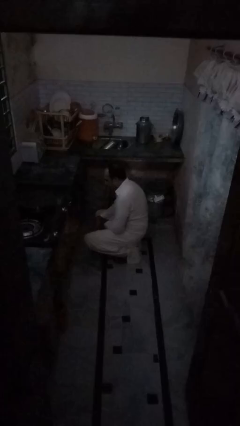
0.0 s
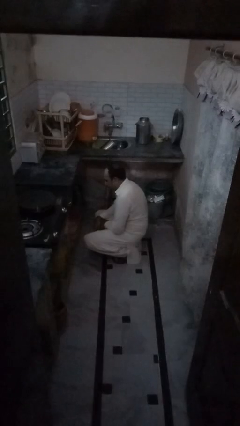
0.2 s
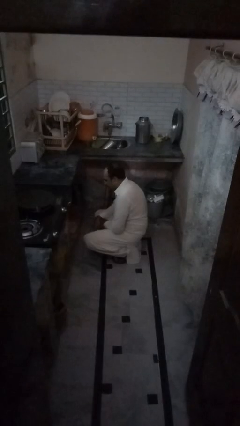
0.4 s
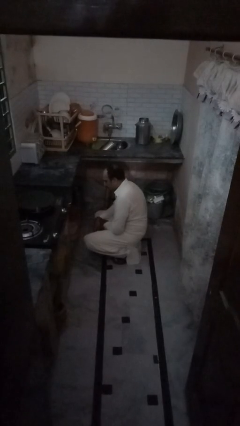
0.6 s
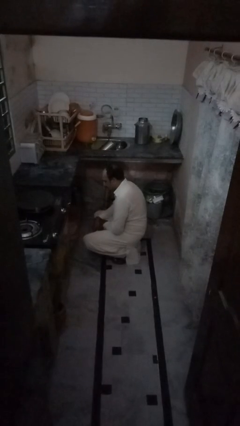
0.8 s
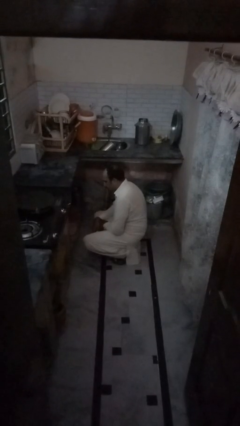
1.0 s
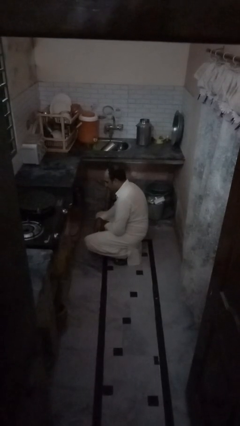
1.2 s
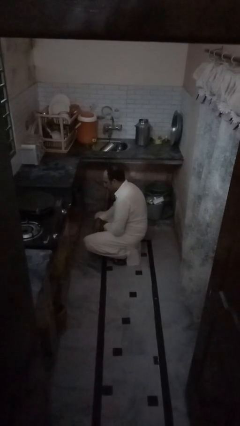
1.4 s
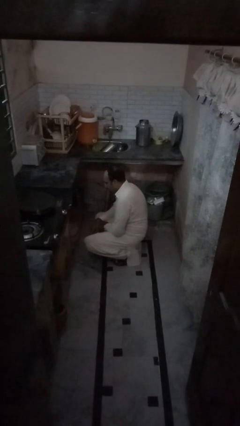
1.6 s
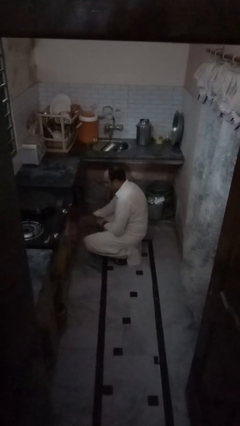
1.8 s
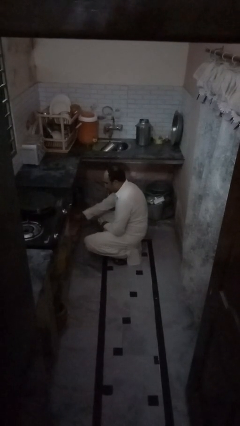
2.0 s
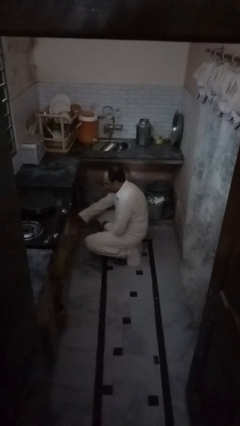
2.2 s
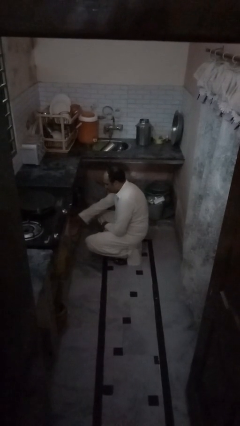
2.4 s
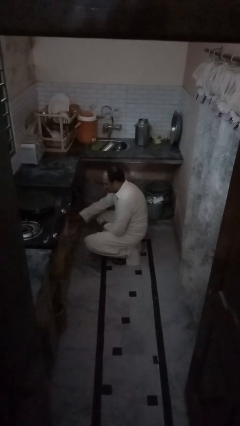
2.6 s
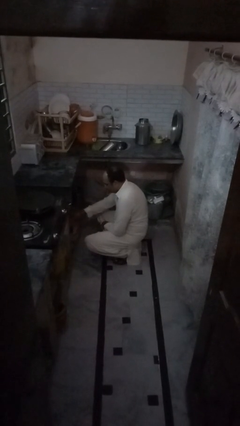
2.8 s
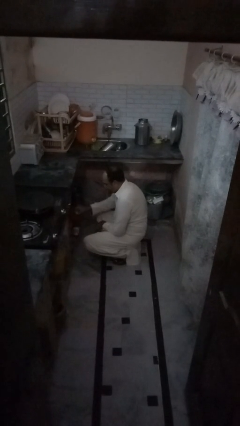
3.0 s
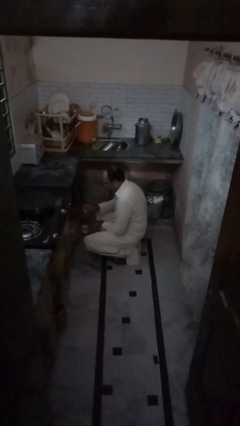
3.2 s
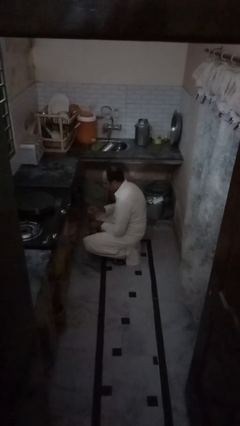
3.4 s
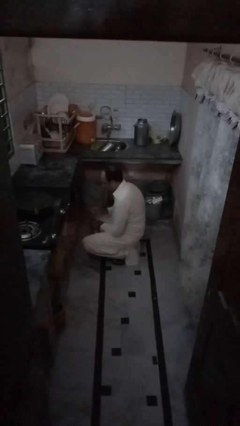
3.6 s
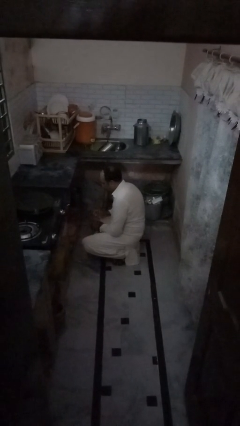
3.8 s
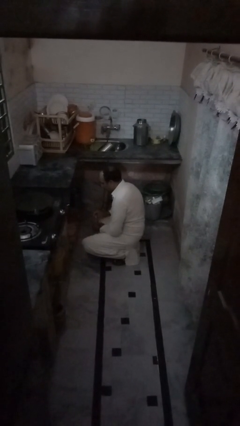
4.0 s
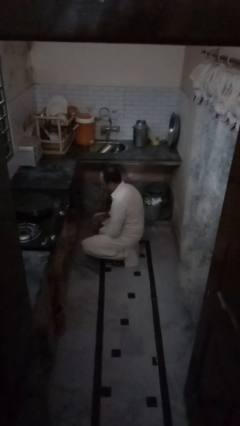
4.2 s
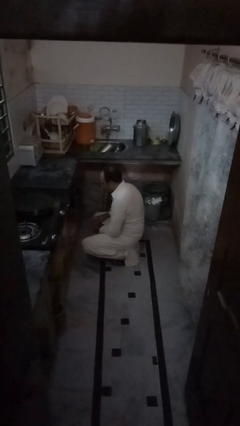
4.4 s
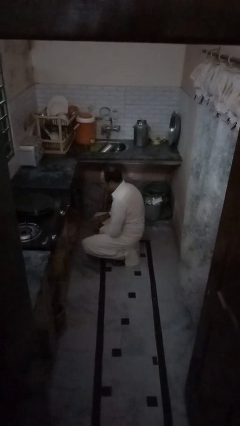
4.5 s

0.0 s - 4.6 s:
person picks up object from cabinet

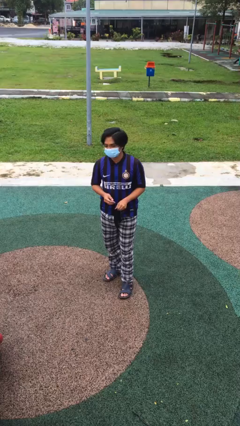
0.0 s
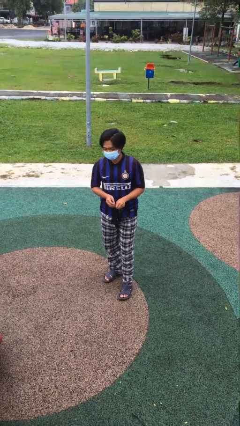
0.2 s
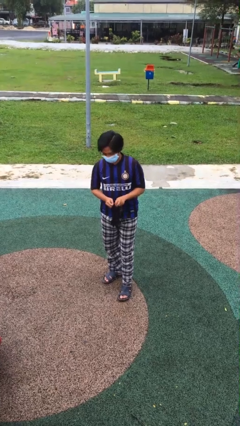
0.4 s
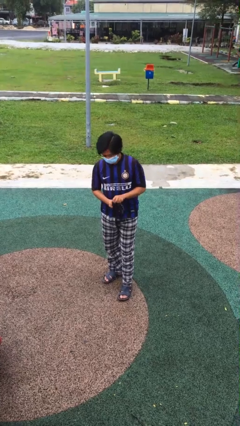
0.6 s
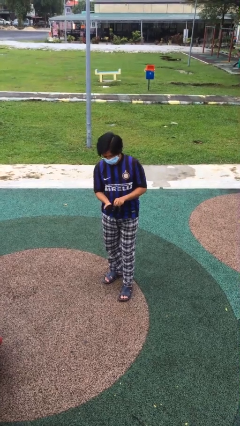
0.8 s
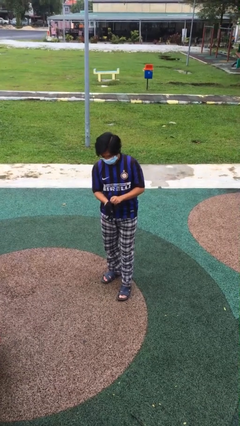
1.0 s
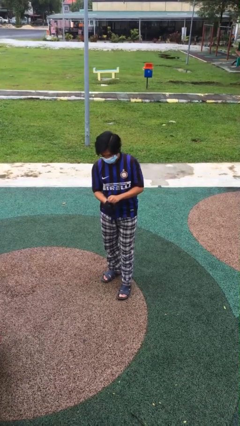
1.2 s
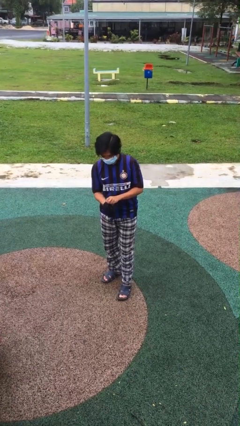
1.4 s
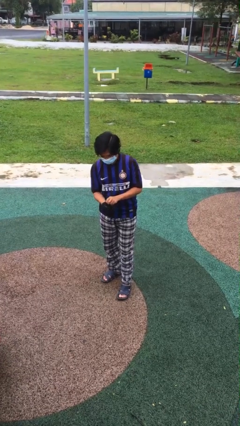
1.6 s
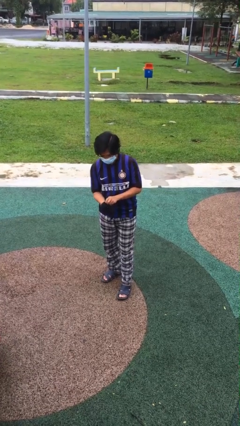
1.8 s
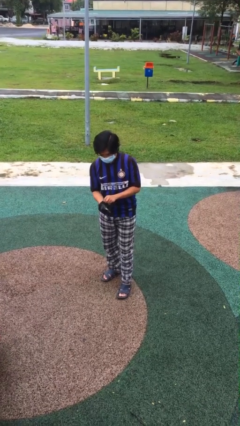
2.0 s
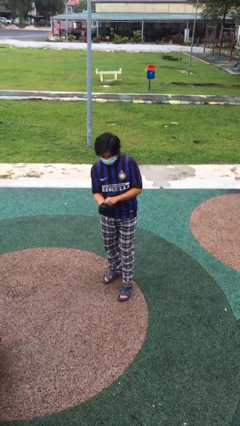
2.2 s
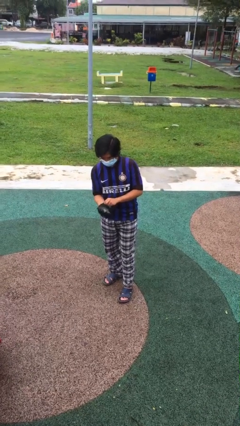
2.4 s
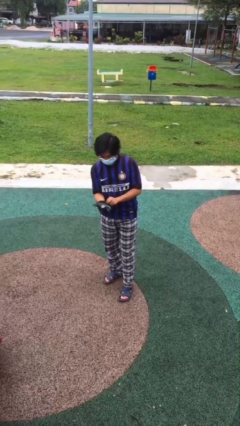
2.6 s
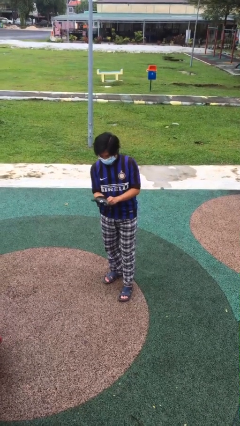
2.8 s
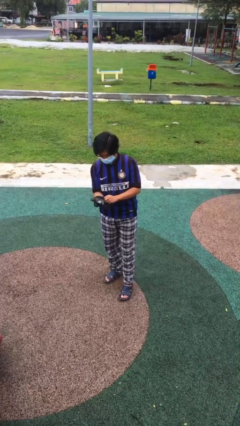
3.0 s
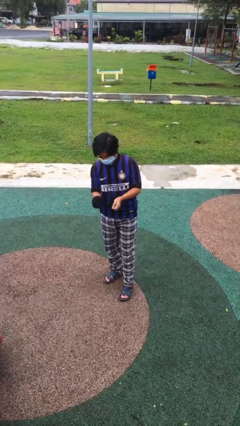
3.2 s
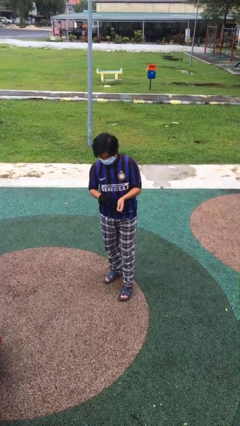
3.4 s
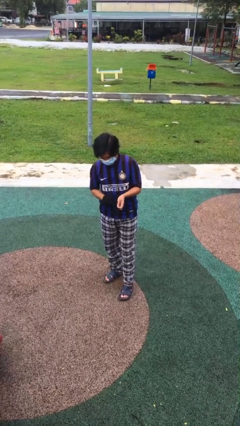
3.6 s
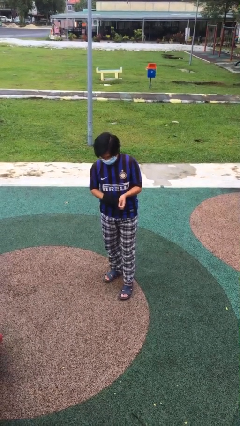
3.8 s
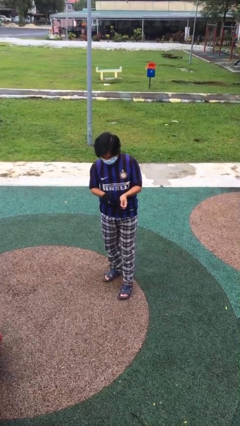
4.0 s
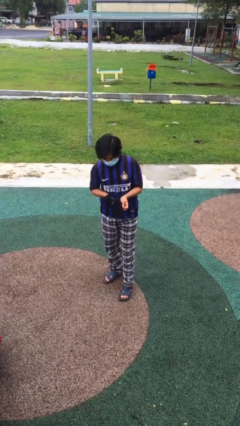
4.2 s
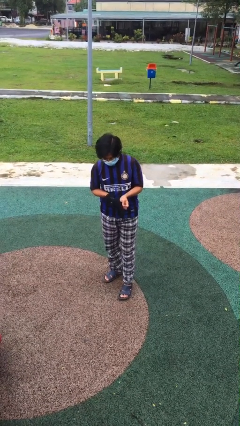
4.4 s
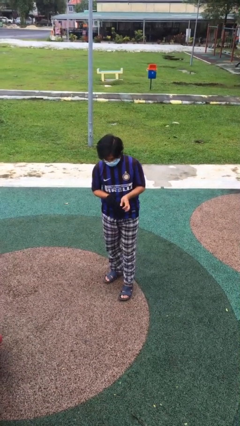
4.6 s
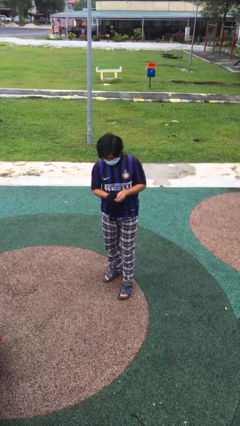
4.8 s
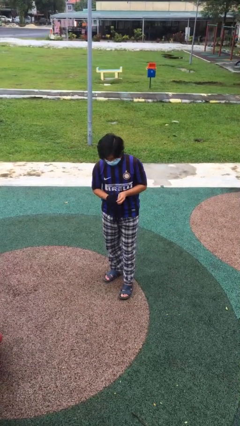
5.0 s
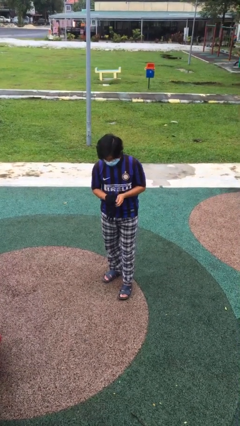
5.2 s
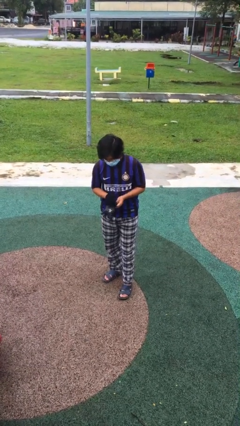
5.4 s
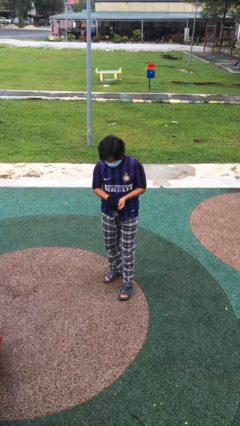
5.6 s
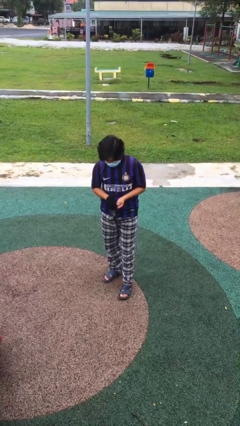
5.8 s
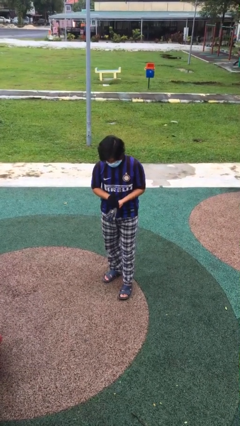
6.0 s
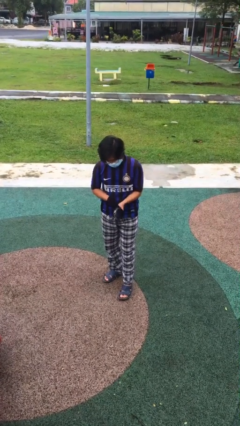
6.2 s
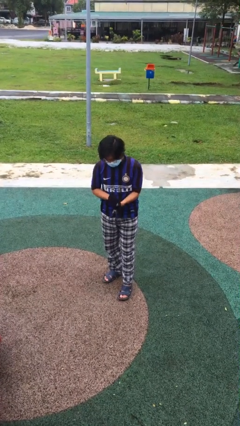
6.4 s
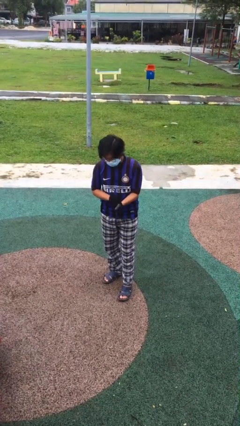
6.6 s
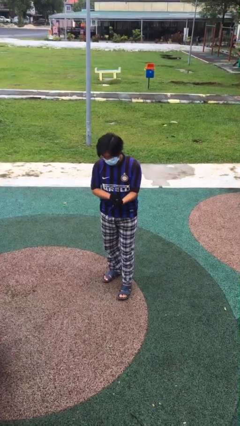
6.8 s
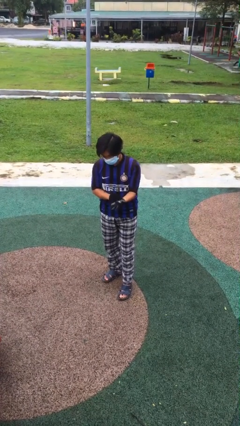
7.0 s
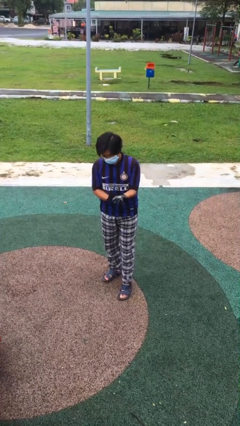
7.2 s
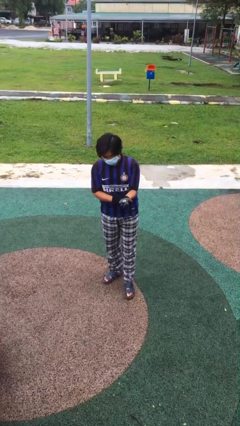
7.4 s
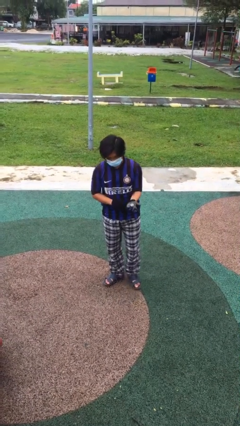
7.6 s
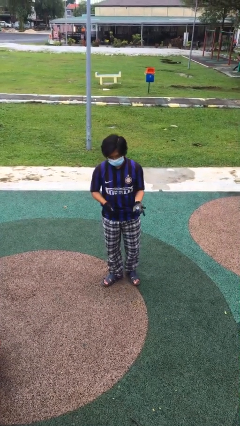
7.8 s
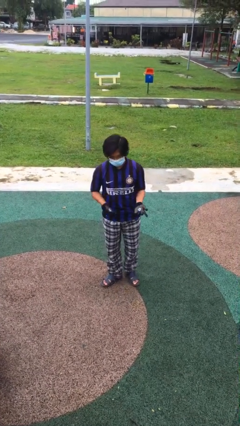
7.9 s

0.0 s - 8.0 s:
person puts on gloves

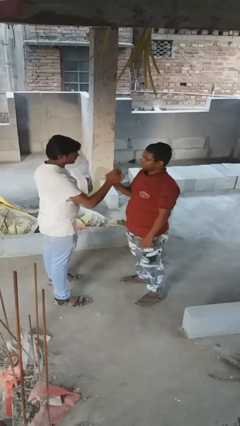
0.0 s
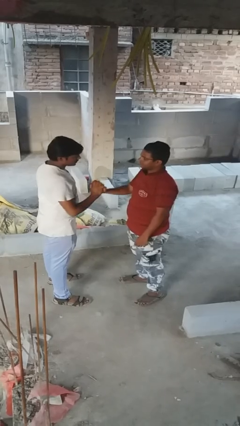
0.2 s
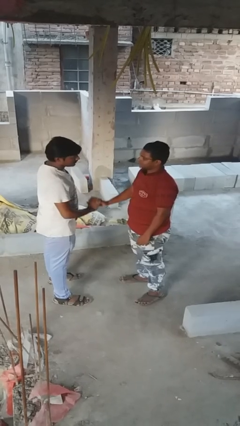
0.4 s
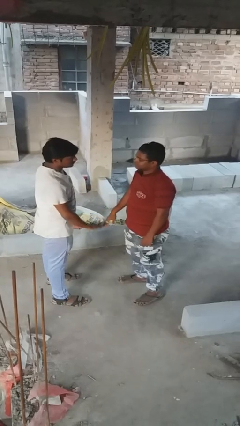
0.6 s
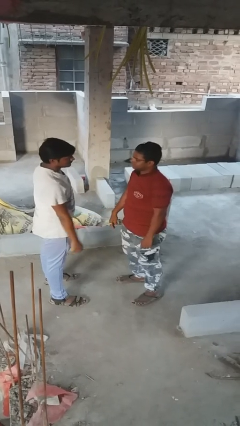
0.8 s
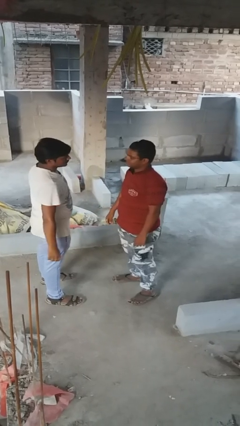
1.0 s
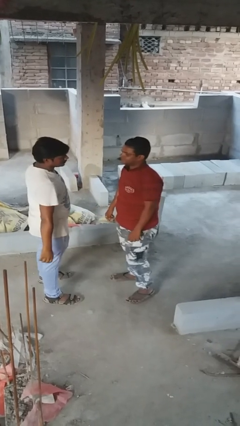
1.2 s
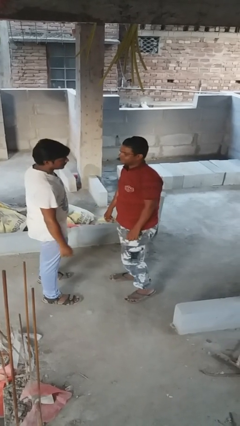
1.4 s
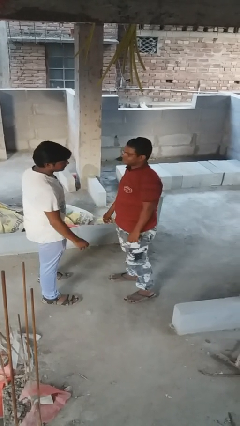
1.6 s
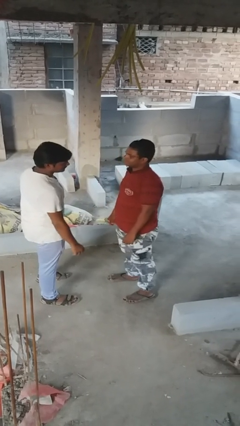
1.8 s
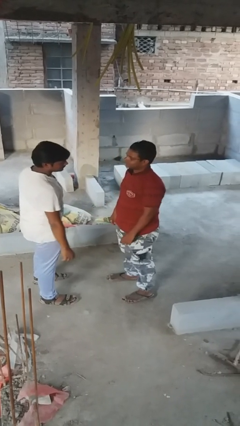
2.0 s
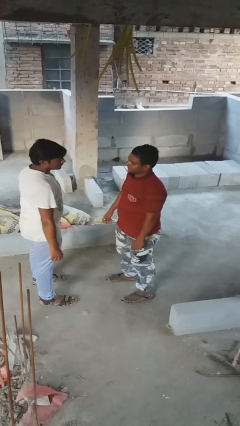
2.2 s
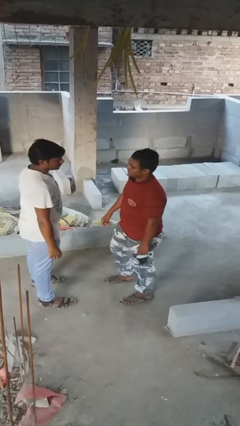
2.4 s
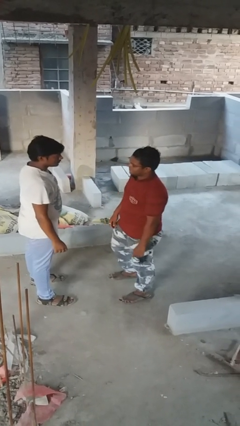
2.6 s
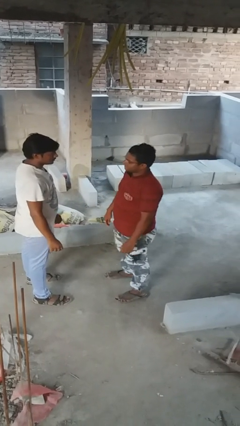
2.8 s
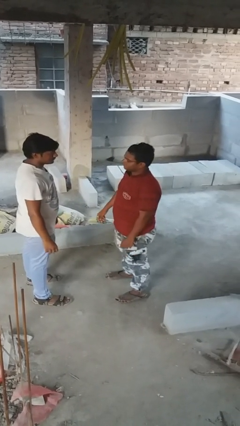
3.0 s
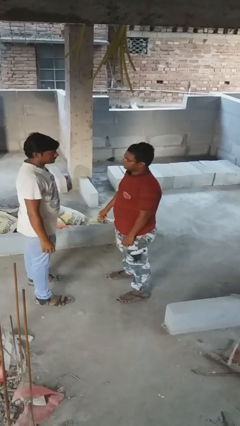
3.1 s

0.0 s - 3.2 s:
person highfives hand

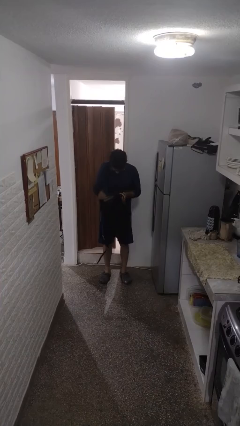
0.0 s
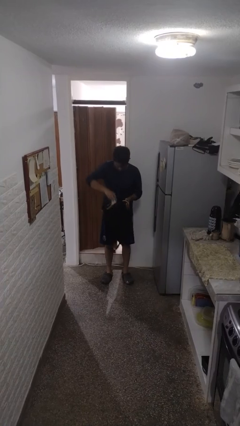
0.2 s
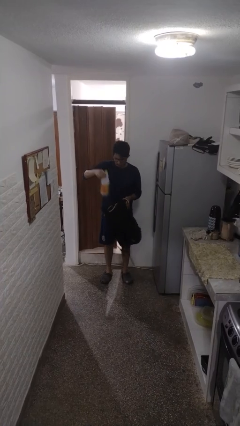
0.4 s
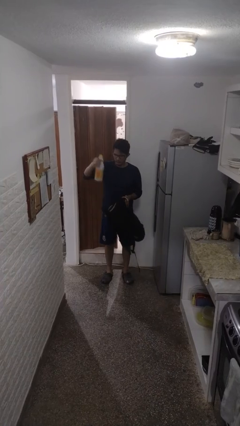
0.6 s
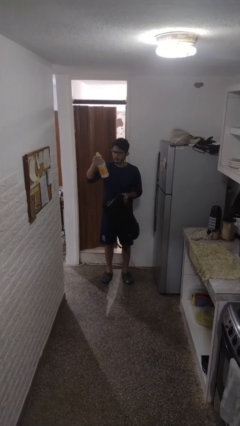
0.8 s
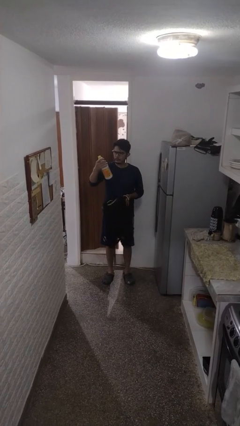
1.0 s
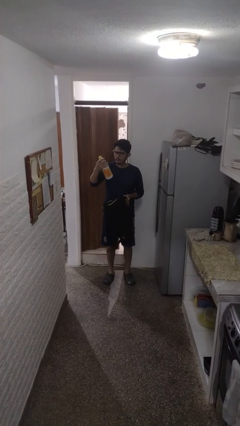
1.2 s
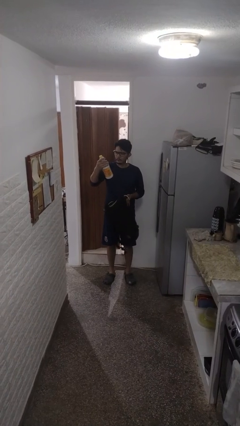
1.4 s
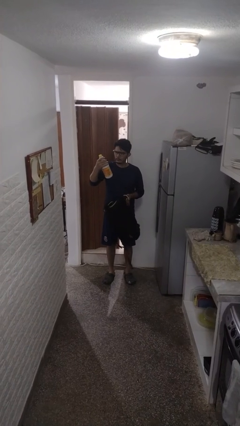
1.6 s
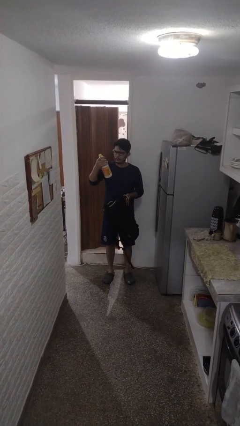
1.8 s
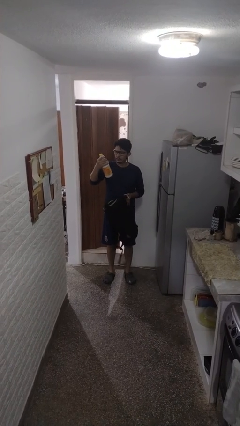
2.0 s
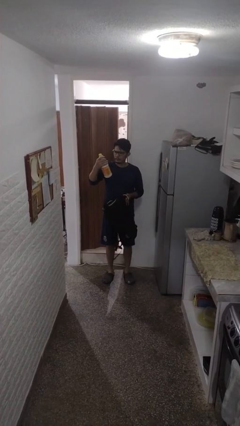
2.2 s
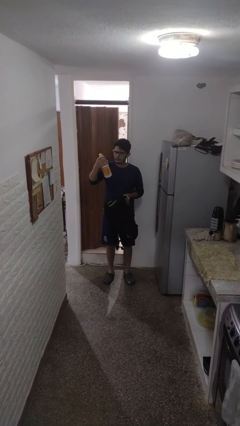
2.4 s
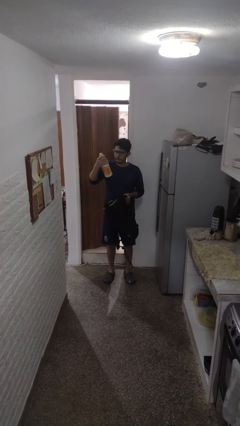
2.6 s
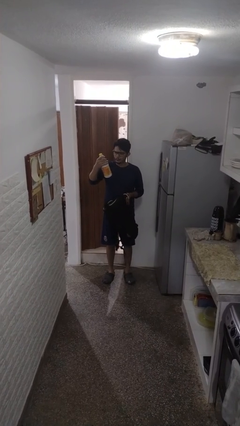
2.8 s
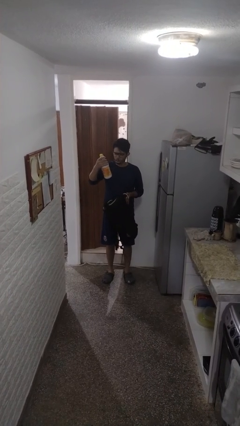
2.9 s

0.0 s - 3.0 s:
person takes object from backpack
